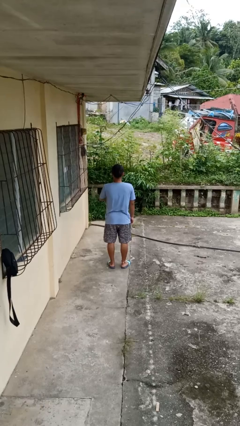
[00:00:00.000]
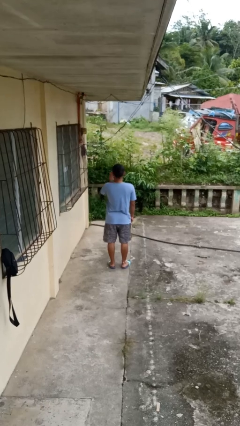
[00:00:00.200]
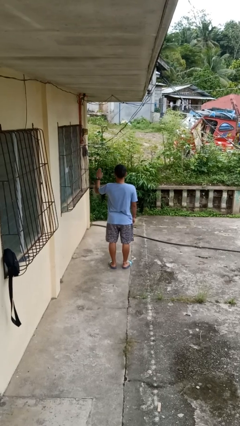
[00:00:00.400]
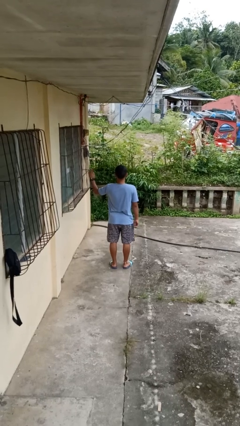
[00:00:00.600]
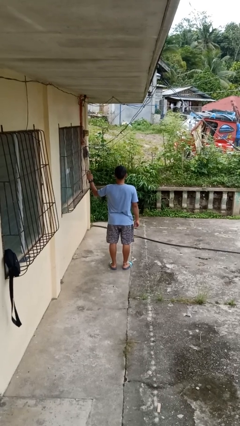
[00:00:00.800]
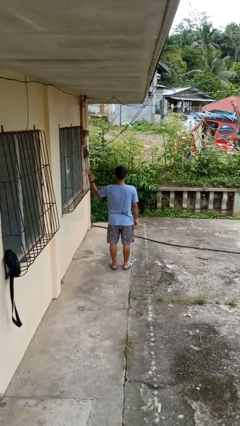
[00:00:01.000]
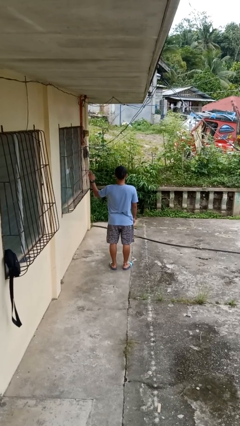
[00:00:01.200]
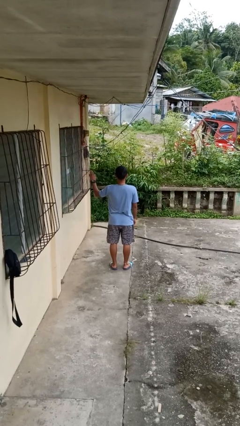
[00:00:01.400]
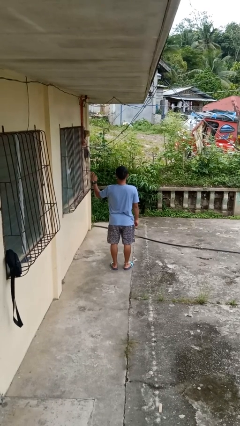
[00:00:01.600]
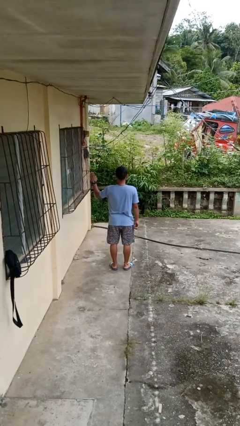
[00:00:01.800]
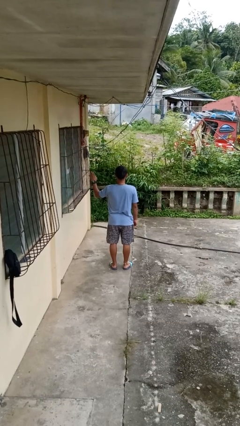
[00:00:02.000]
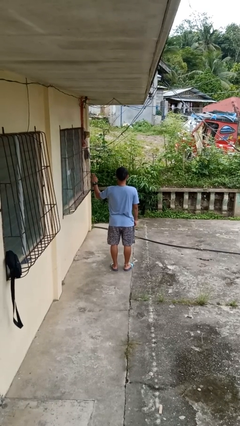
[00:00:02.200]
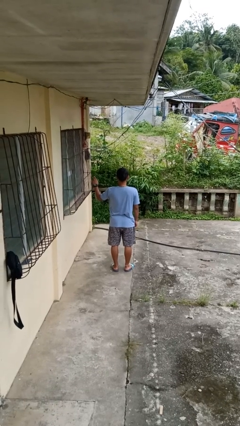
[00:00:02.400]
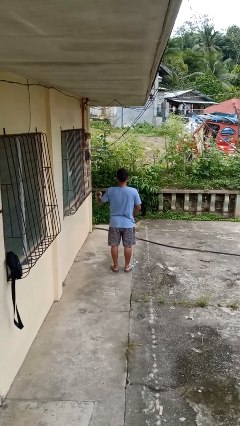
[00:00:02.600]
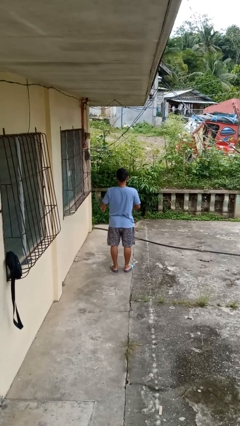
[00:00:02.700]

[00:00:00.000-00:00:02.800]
person gestures swipe left

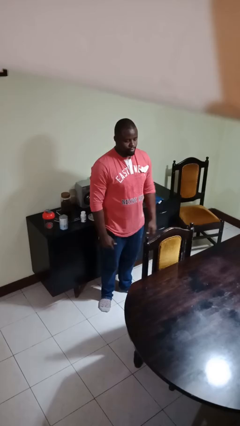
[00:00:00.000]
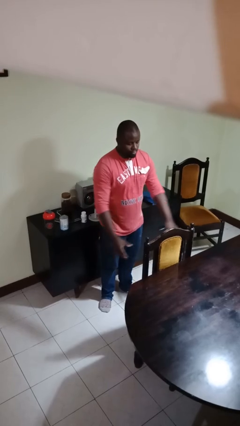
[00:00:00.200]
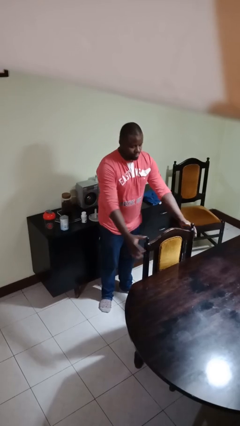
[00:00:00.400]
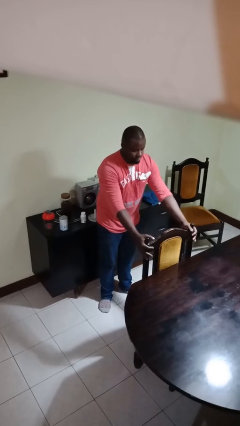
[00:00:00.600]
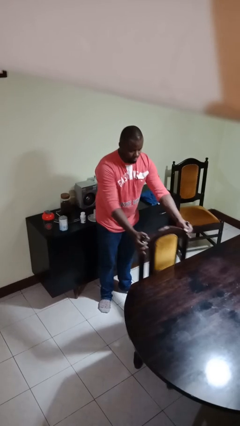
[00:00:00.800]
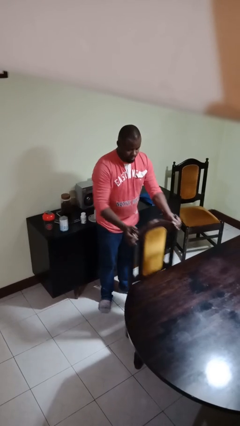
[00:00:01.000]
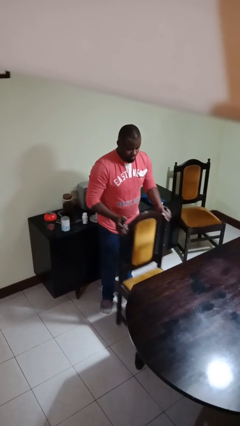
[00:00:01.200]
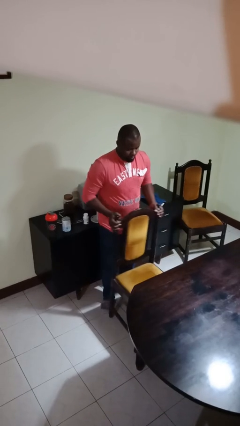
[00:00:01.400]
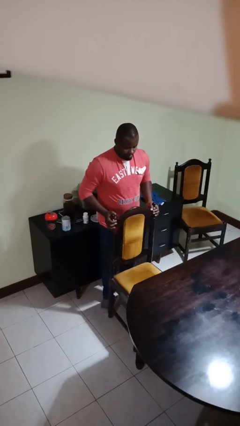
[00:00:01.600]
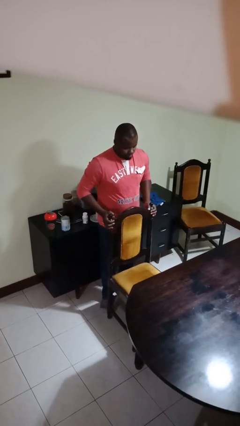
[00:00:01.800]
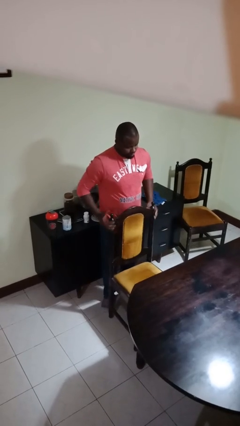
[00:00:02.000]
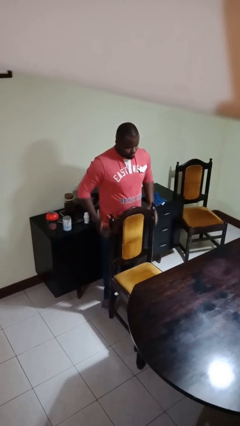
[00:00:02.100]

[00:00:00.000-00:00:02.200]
person pulls out chair

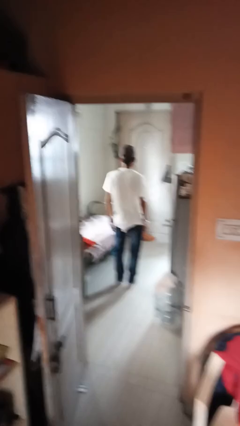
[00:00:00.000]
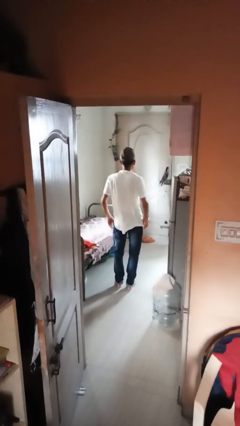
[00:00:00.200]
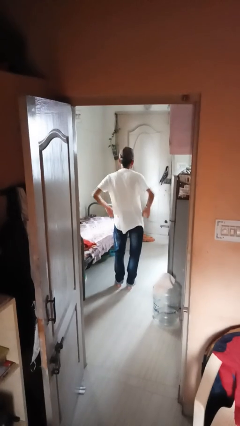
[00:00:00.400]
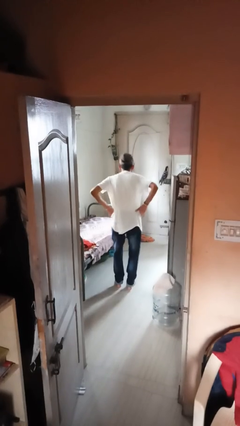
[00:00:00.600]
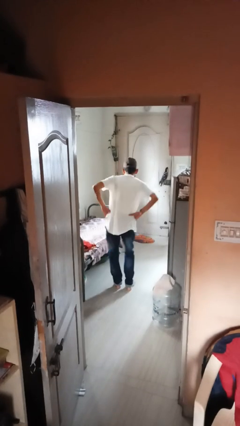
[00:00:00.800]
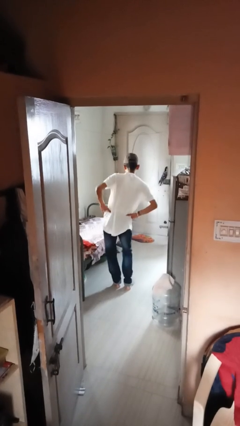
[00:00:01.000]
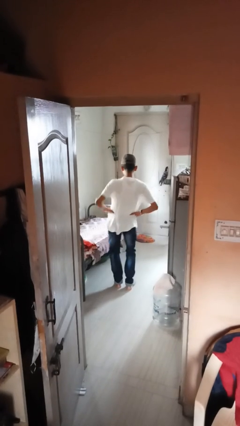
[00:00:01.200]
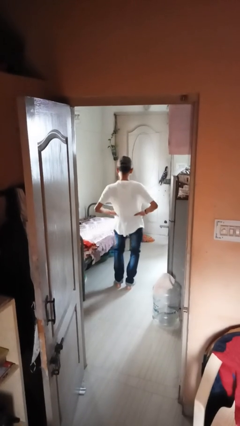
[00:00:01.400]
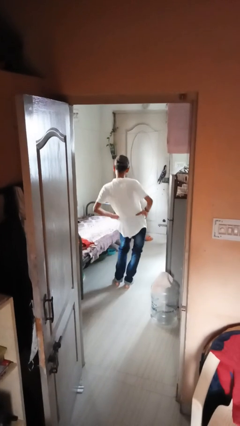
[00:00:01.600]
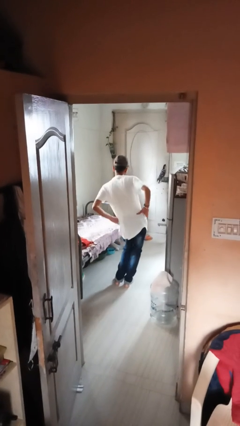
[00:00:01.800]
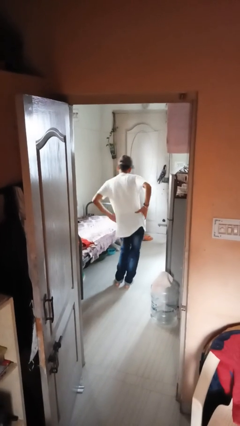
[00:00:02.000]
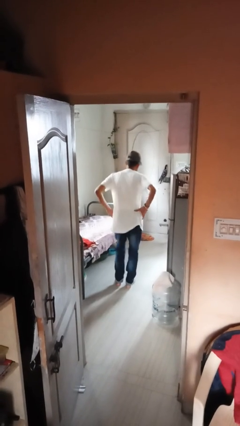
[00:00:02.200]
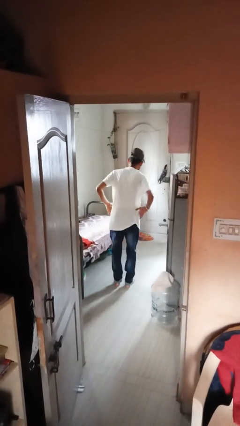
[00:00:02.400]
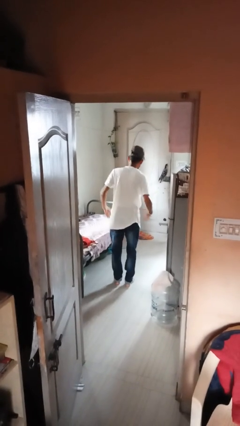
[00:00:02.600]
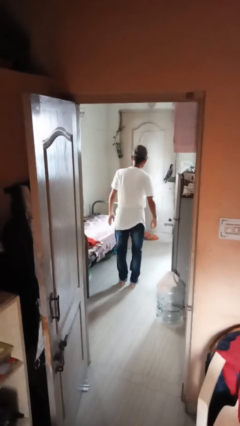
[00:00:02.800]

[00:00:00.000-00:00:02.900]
person wiggles hips

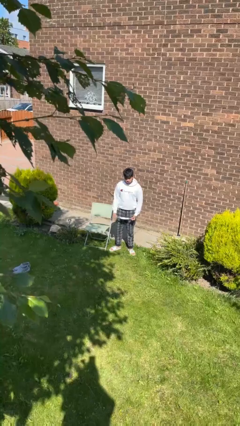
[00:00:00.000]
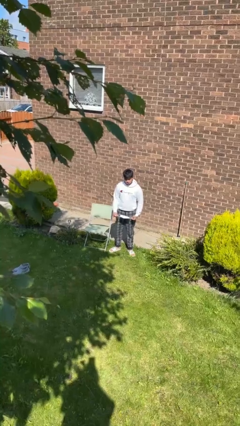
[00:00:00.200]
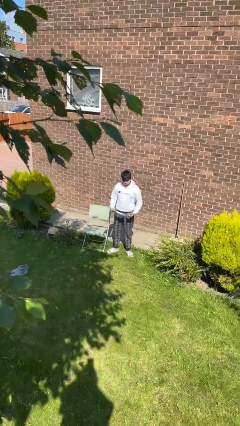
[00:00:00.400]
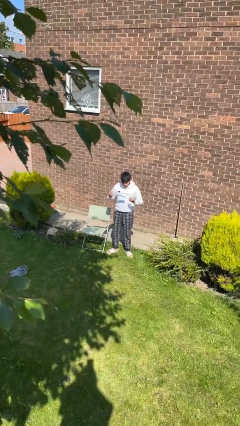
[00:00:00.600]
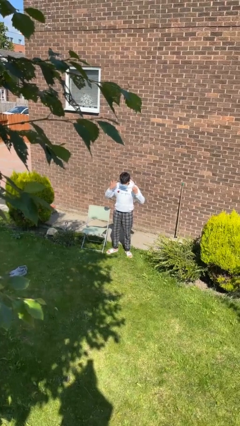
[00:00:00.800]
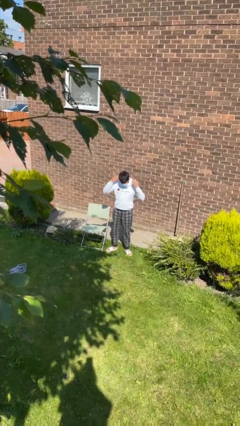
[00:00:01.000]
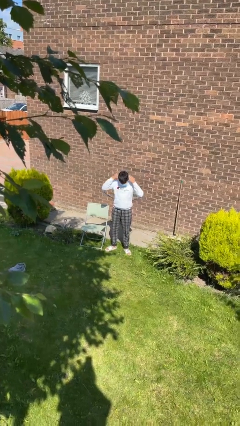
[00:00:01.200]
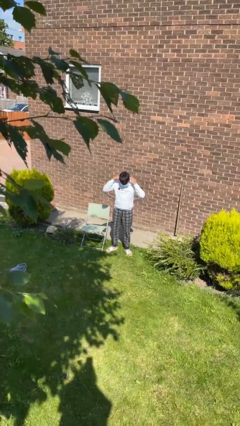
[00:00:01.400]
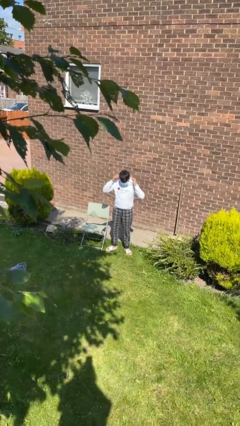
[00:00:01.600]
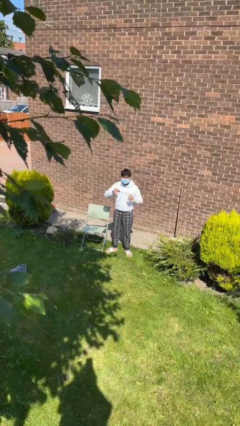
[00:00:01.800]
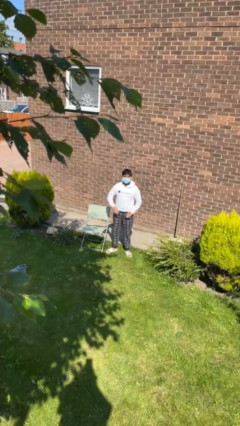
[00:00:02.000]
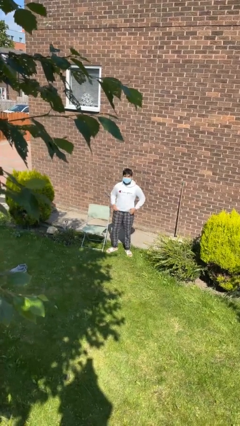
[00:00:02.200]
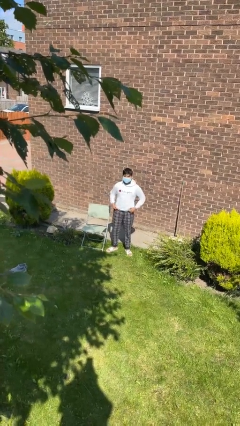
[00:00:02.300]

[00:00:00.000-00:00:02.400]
person puts on facemask

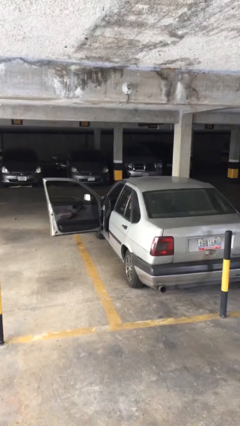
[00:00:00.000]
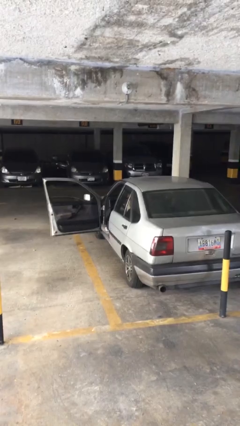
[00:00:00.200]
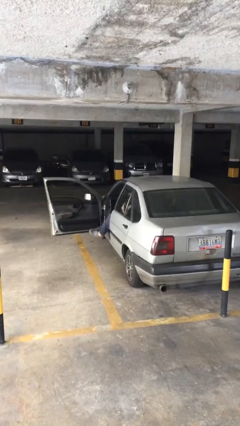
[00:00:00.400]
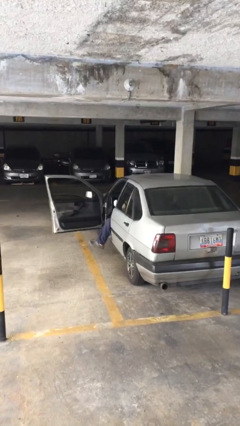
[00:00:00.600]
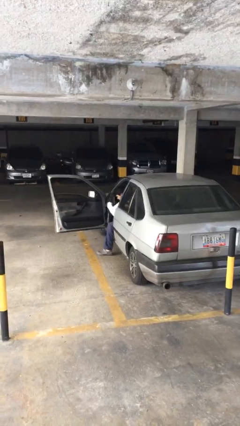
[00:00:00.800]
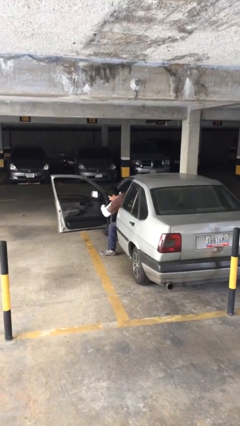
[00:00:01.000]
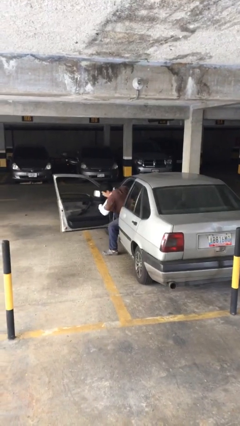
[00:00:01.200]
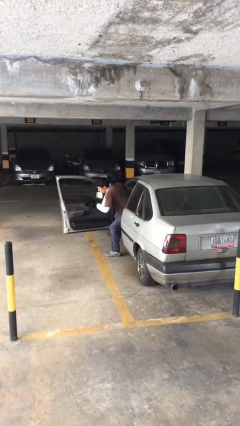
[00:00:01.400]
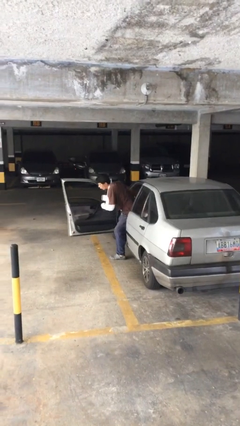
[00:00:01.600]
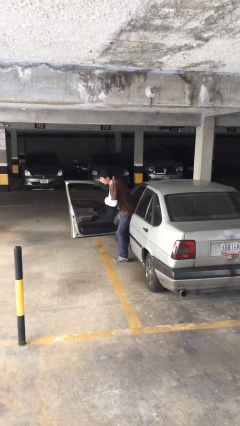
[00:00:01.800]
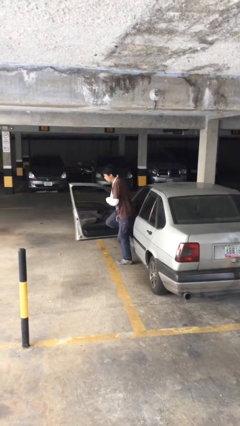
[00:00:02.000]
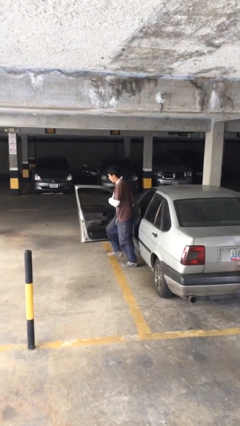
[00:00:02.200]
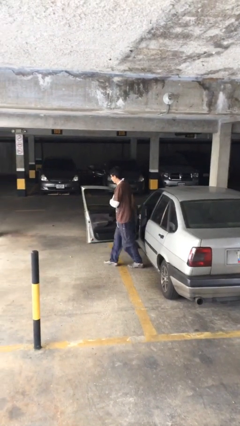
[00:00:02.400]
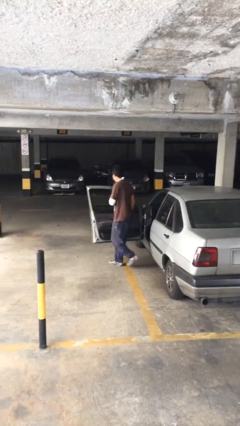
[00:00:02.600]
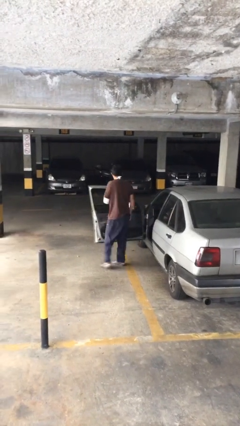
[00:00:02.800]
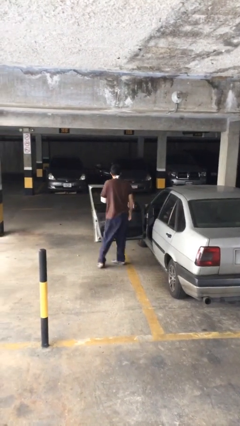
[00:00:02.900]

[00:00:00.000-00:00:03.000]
person exits car

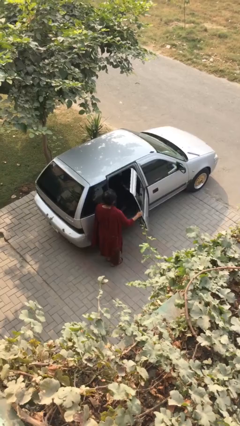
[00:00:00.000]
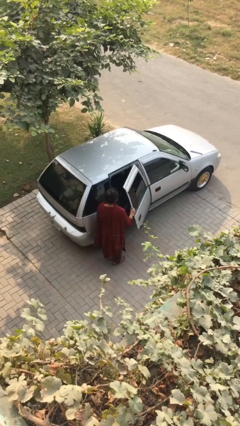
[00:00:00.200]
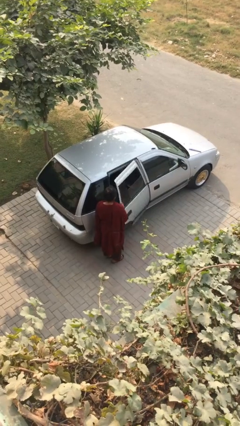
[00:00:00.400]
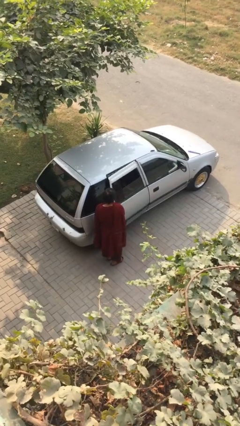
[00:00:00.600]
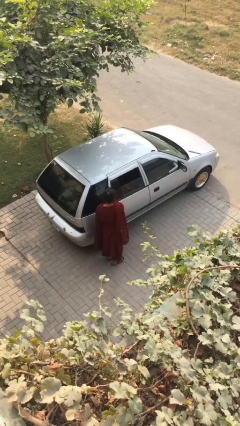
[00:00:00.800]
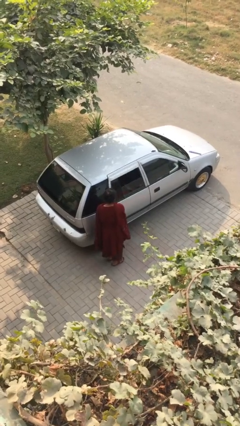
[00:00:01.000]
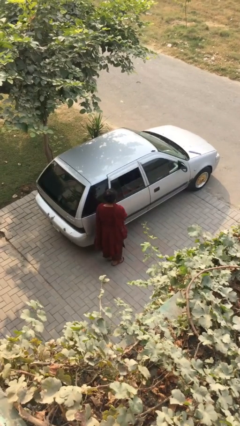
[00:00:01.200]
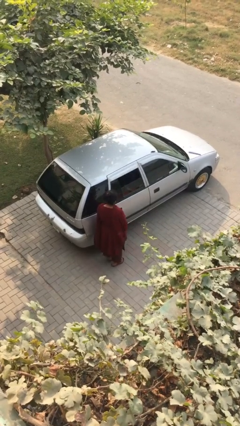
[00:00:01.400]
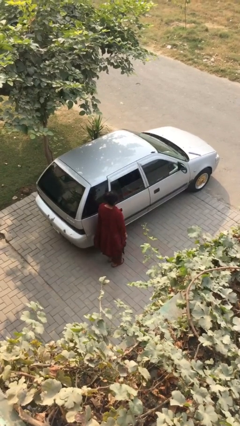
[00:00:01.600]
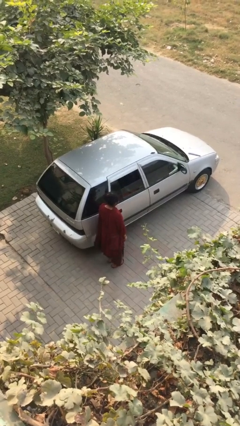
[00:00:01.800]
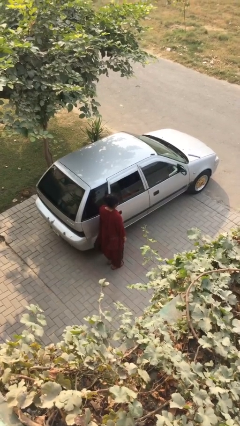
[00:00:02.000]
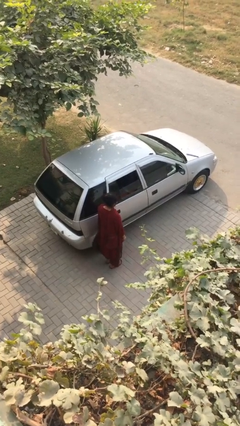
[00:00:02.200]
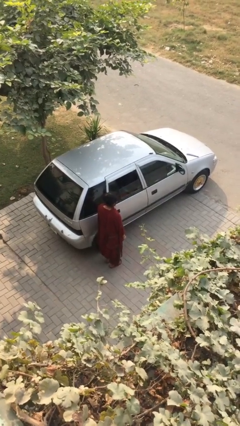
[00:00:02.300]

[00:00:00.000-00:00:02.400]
person closes car door

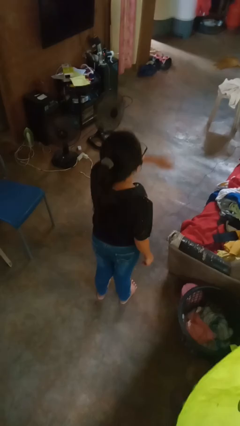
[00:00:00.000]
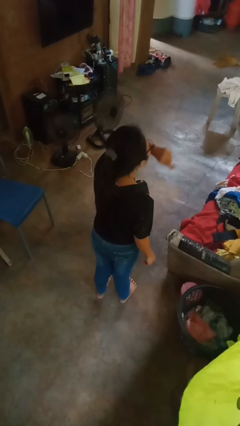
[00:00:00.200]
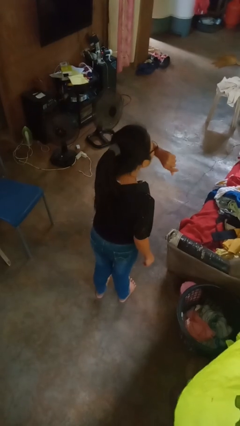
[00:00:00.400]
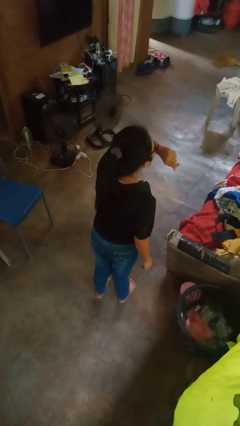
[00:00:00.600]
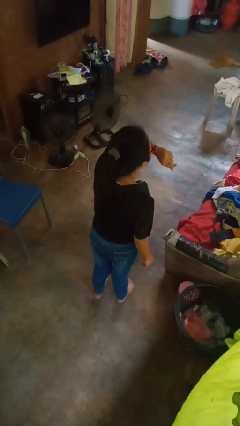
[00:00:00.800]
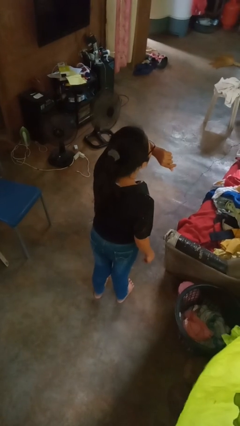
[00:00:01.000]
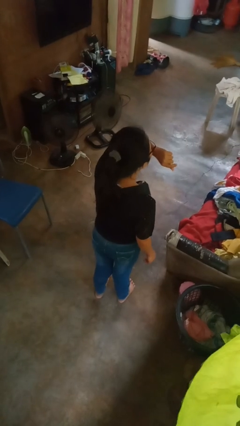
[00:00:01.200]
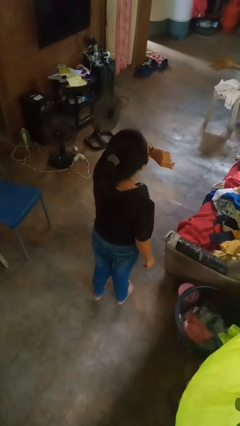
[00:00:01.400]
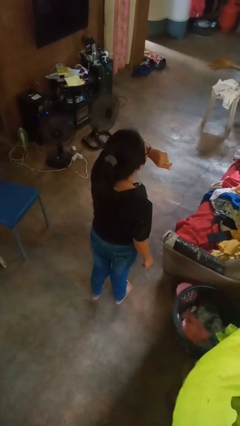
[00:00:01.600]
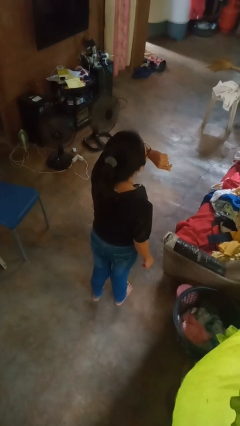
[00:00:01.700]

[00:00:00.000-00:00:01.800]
person sneezes into arm
